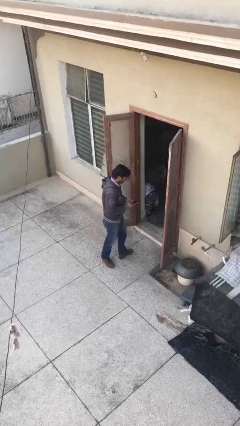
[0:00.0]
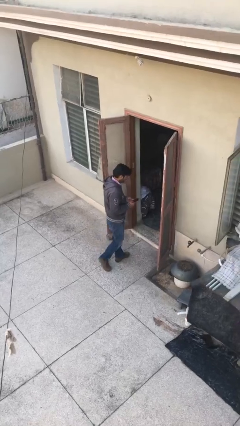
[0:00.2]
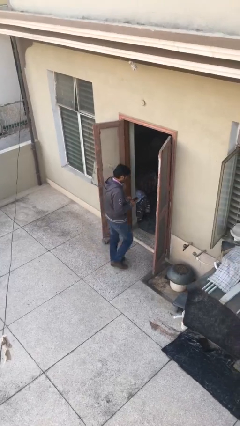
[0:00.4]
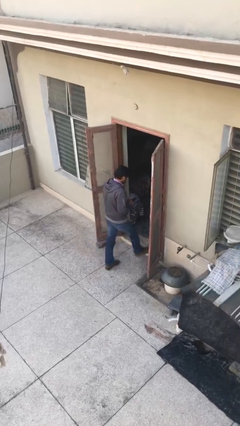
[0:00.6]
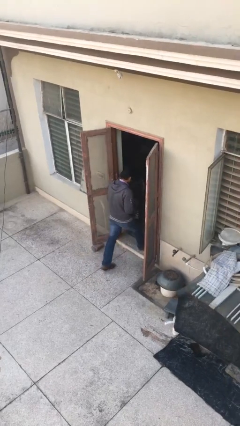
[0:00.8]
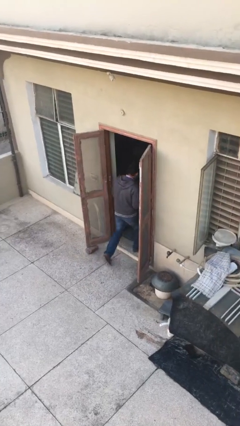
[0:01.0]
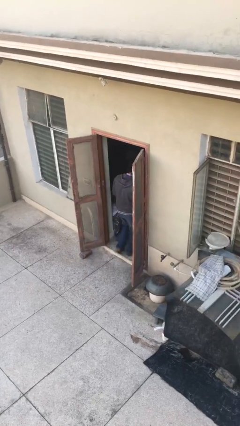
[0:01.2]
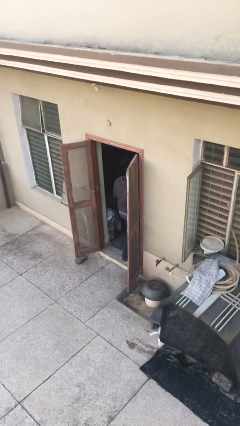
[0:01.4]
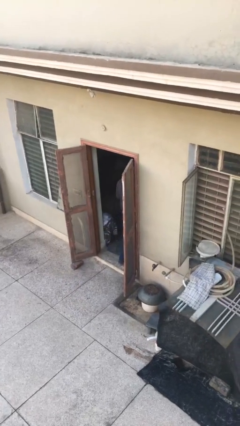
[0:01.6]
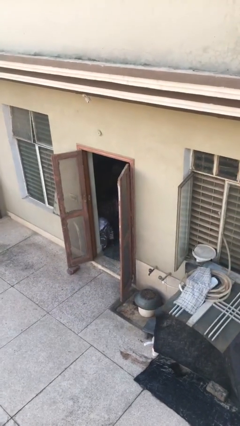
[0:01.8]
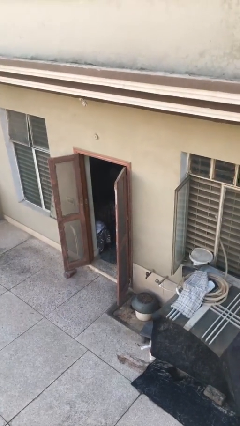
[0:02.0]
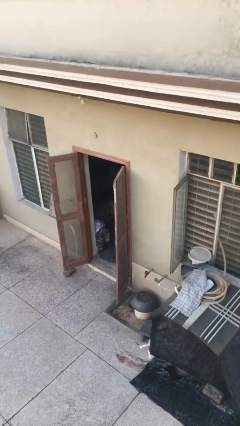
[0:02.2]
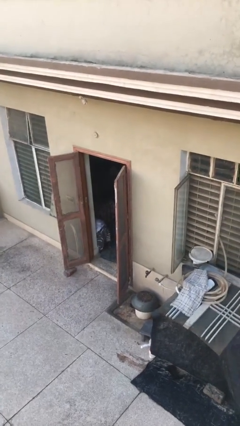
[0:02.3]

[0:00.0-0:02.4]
person exits scene through structure

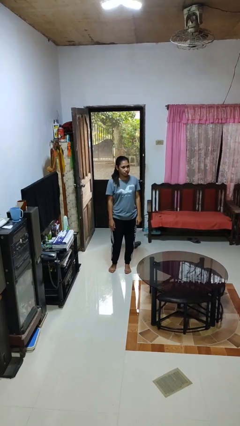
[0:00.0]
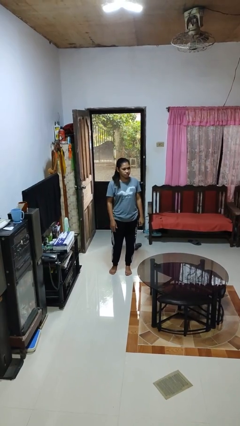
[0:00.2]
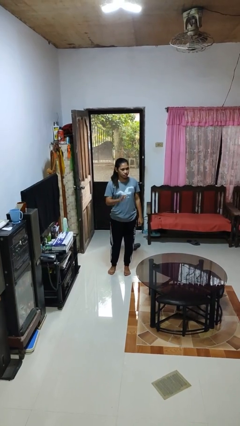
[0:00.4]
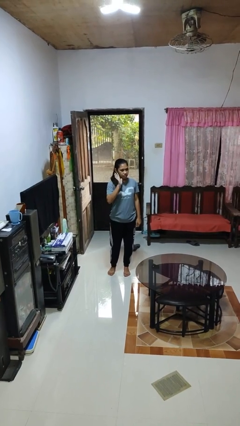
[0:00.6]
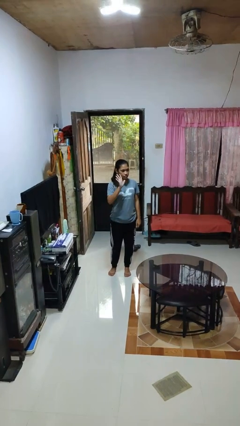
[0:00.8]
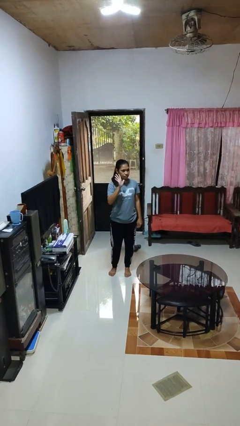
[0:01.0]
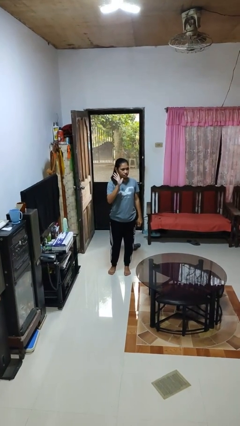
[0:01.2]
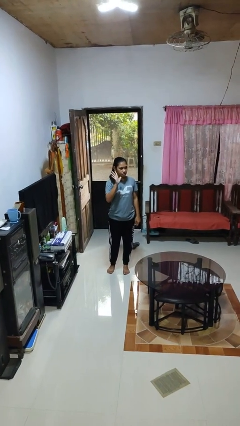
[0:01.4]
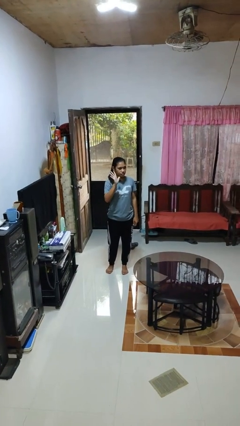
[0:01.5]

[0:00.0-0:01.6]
person gestures number five

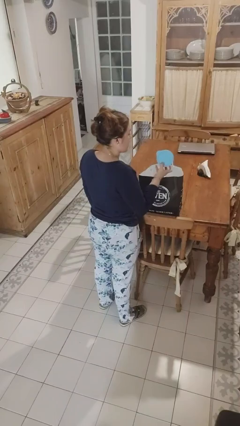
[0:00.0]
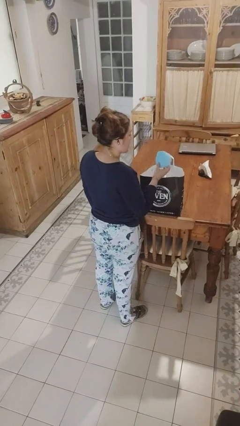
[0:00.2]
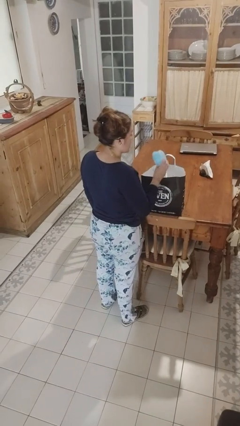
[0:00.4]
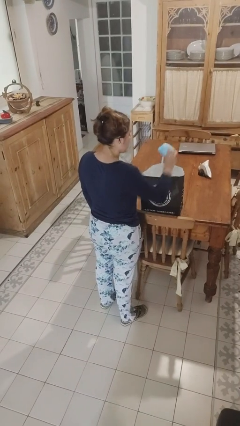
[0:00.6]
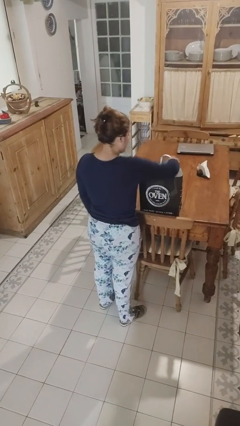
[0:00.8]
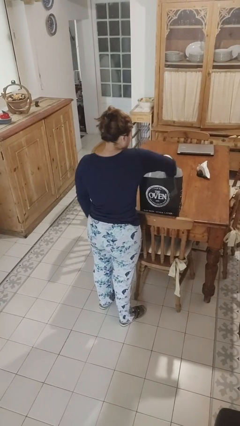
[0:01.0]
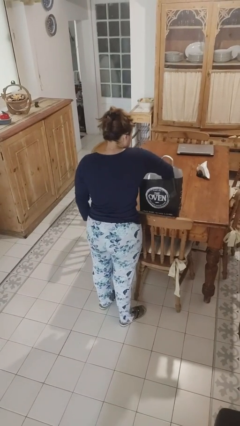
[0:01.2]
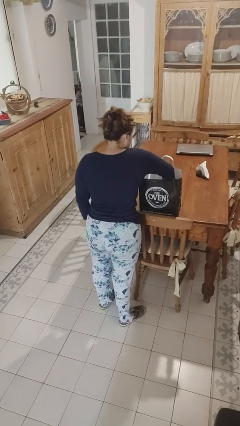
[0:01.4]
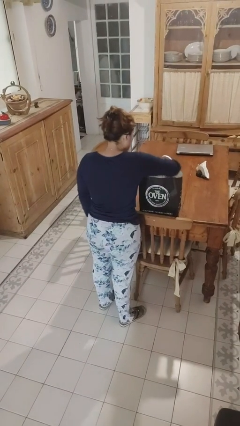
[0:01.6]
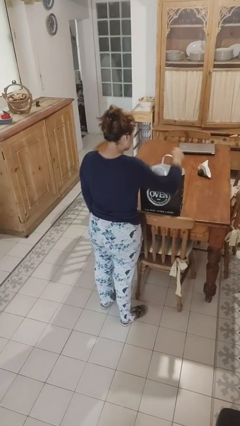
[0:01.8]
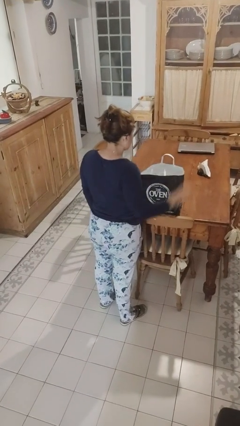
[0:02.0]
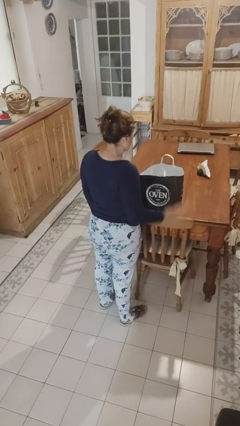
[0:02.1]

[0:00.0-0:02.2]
person puts object into bag

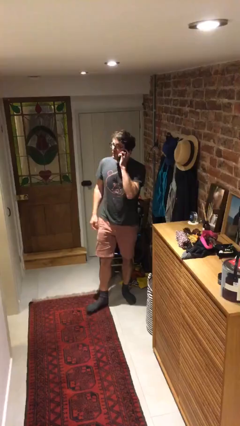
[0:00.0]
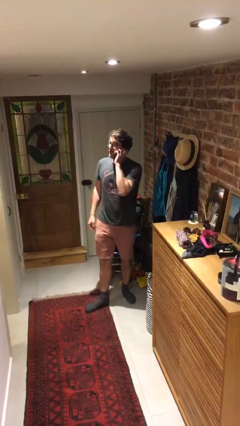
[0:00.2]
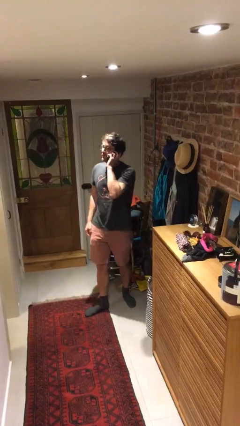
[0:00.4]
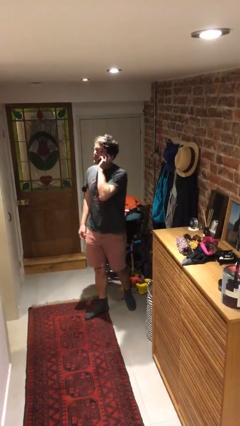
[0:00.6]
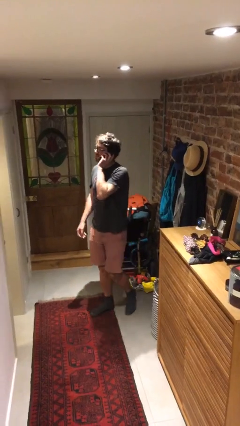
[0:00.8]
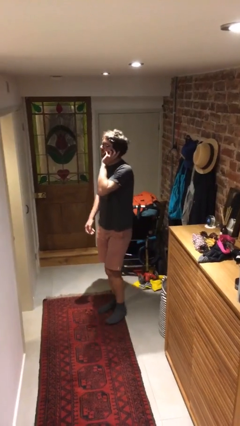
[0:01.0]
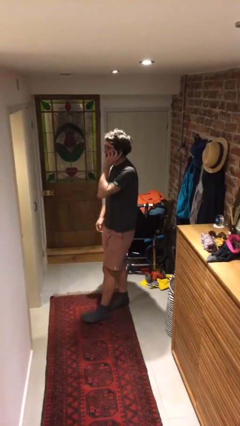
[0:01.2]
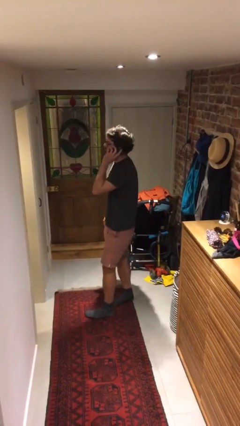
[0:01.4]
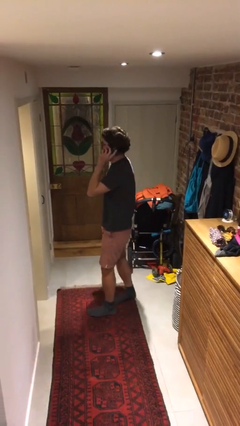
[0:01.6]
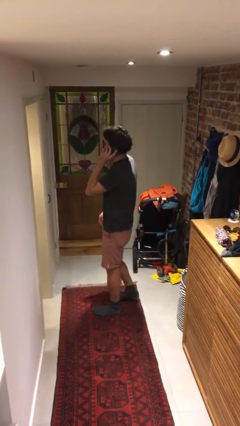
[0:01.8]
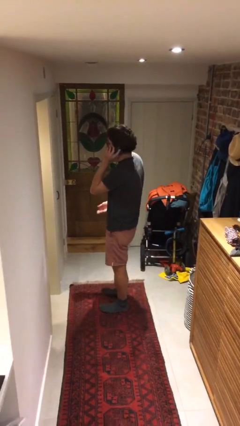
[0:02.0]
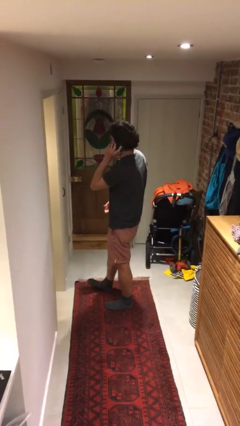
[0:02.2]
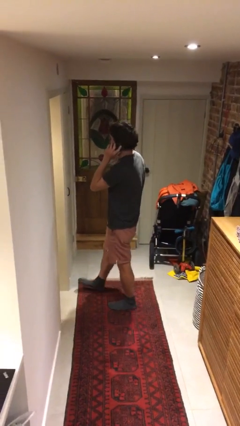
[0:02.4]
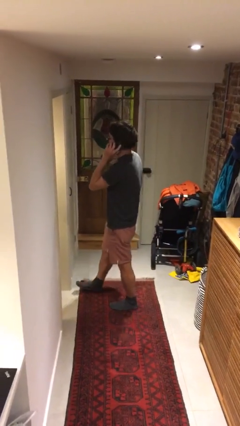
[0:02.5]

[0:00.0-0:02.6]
person talks on phone

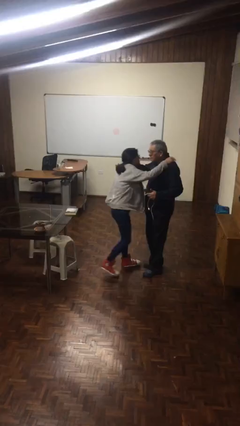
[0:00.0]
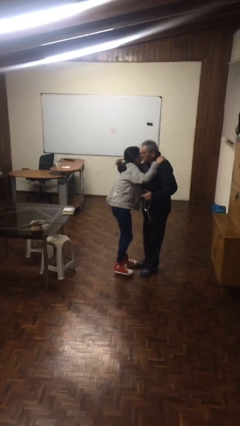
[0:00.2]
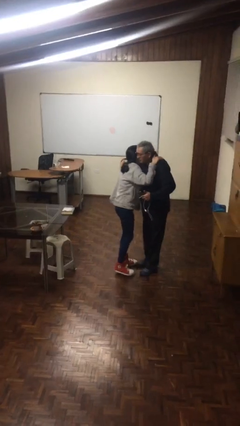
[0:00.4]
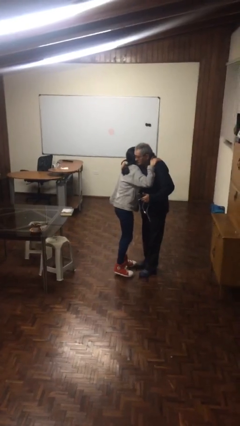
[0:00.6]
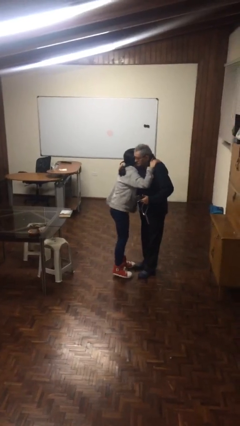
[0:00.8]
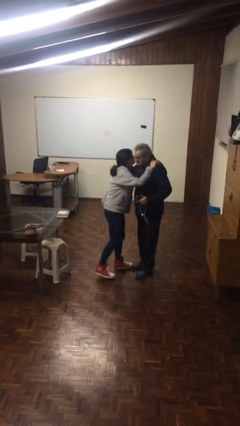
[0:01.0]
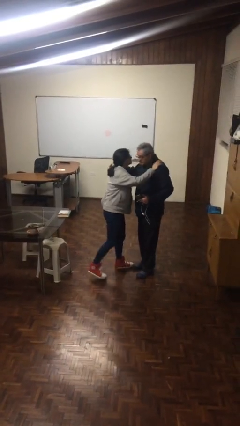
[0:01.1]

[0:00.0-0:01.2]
person embraces person

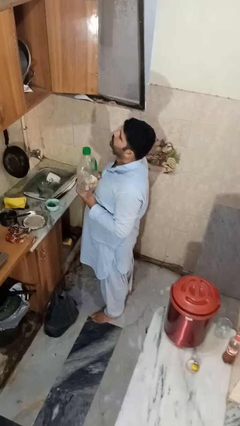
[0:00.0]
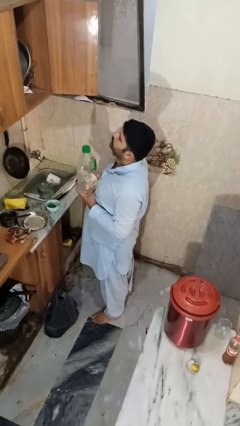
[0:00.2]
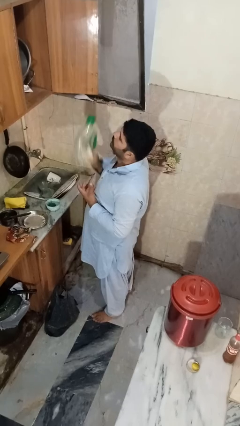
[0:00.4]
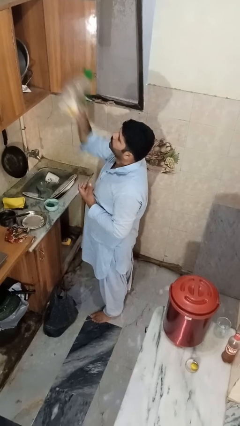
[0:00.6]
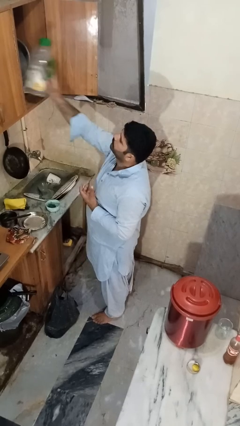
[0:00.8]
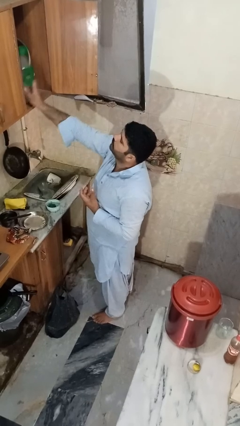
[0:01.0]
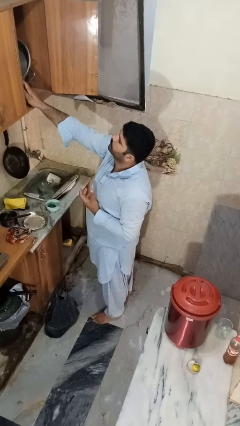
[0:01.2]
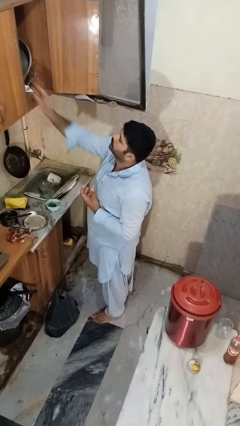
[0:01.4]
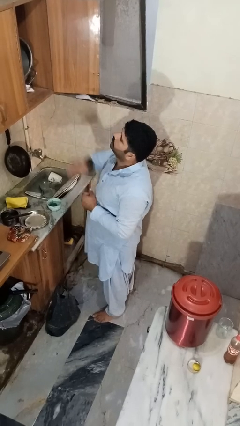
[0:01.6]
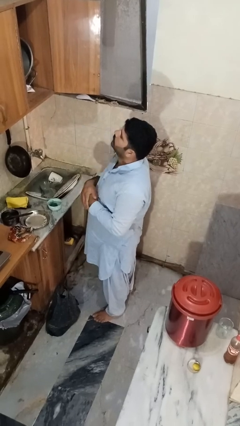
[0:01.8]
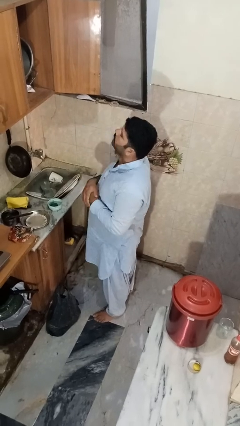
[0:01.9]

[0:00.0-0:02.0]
person puts object in cabinet

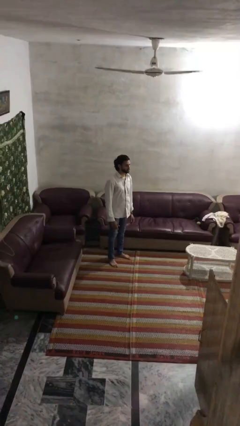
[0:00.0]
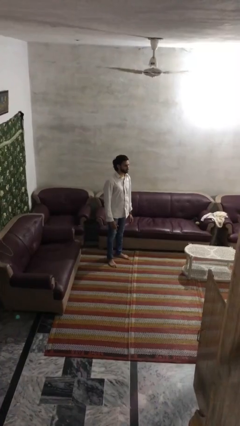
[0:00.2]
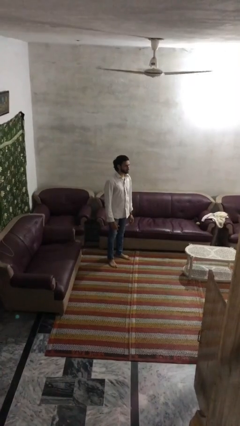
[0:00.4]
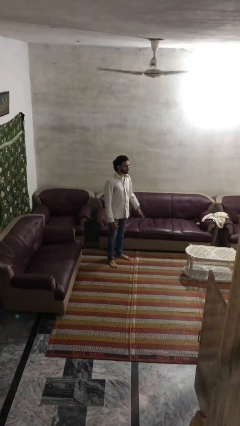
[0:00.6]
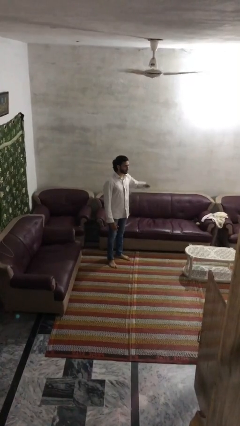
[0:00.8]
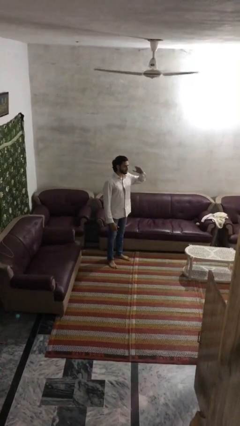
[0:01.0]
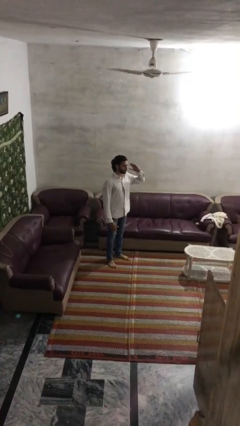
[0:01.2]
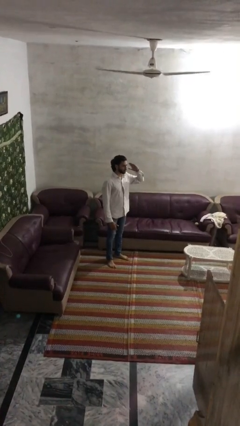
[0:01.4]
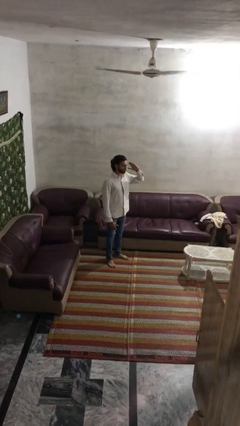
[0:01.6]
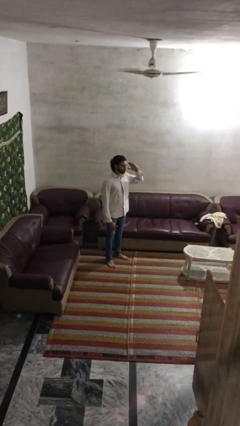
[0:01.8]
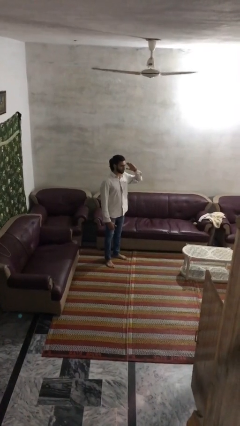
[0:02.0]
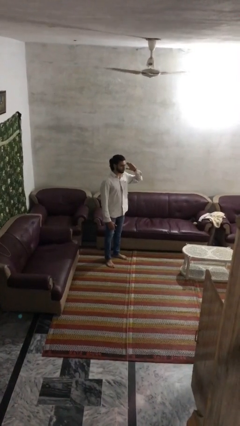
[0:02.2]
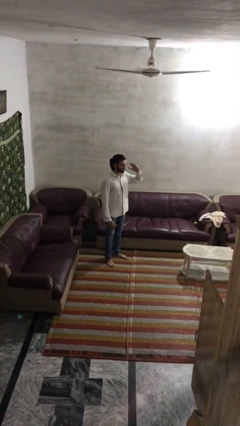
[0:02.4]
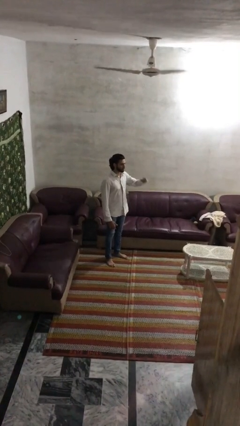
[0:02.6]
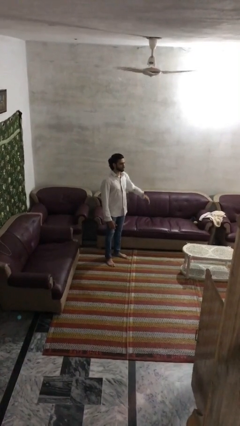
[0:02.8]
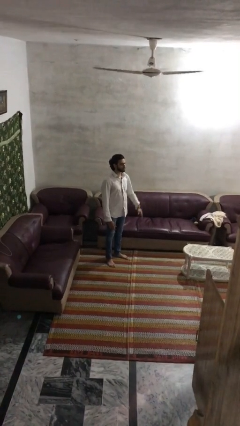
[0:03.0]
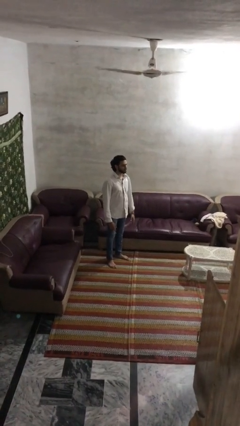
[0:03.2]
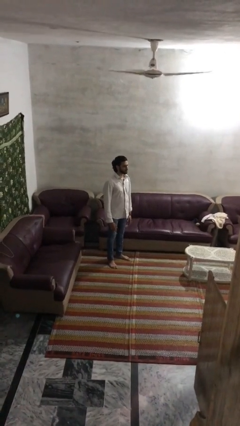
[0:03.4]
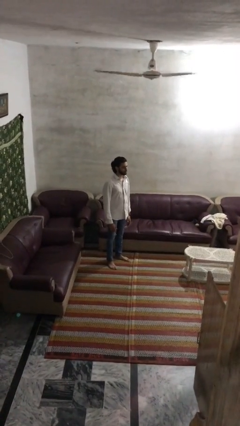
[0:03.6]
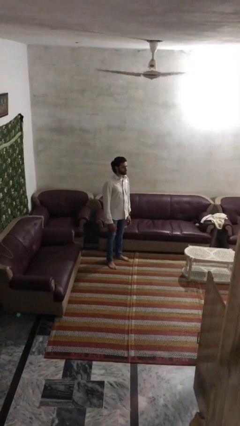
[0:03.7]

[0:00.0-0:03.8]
person salutes

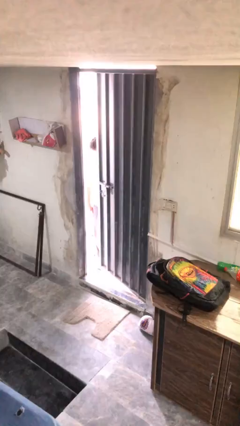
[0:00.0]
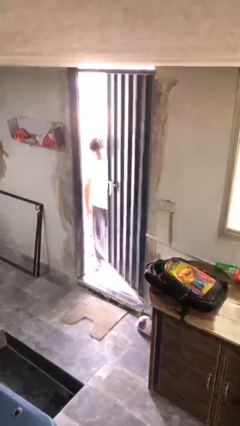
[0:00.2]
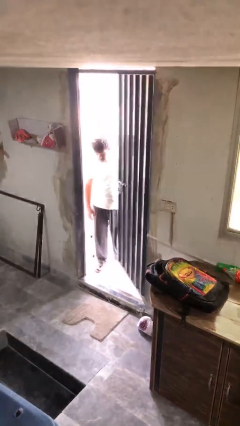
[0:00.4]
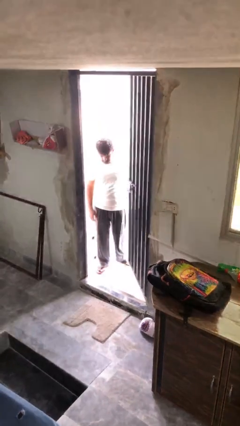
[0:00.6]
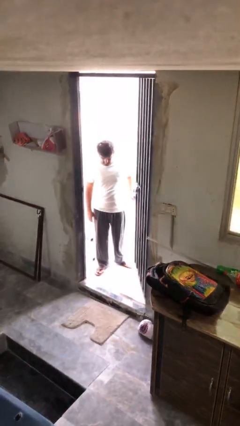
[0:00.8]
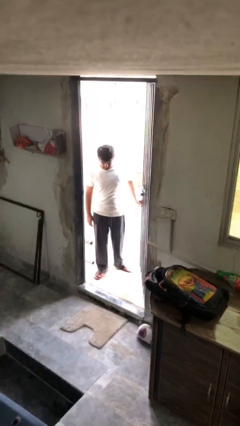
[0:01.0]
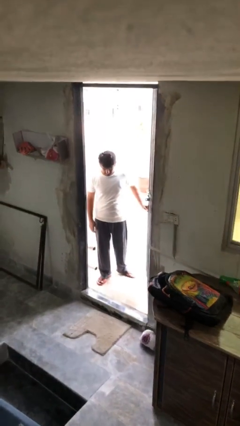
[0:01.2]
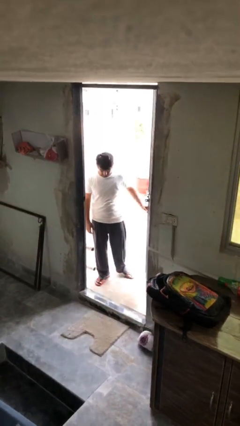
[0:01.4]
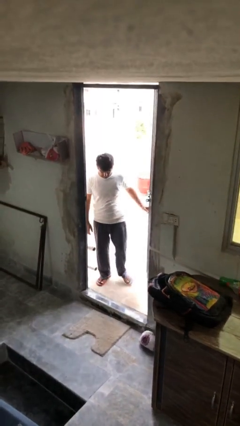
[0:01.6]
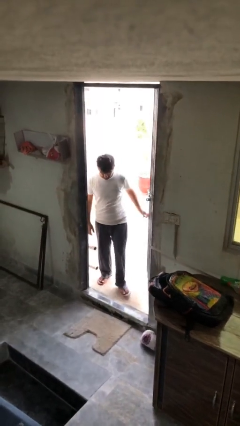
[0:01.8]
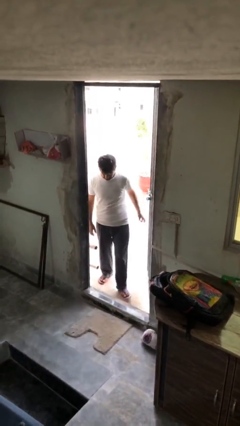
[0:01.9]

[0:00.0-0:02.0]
person opens facility door
